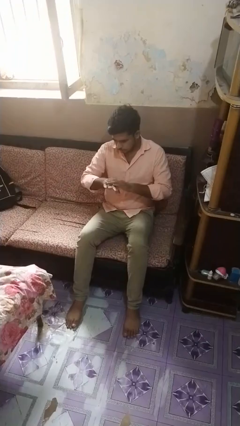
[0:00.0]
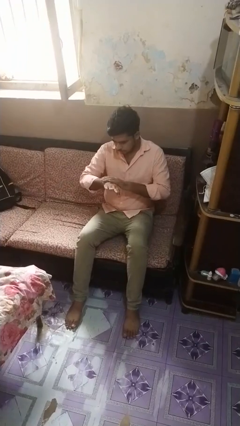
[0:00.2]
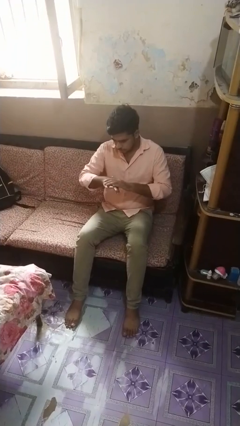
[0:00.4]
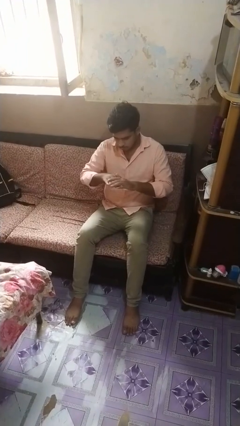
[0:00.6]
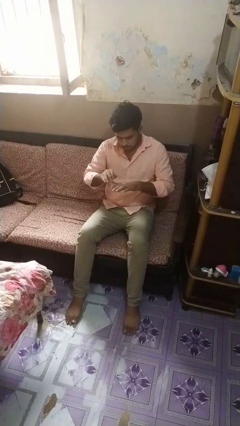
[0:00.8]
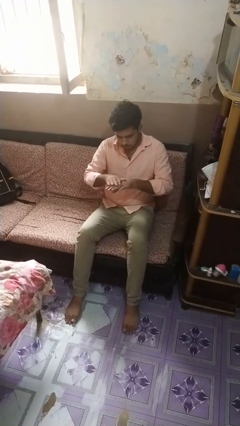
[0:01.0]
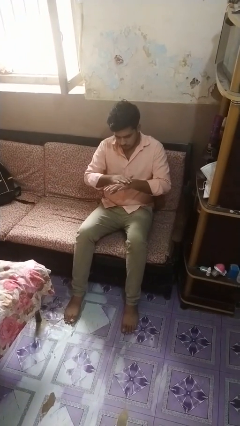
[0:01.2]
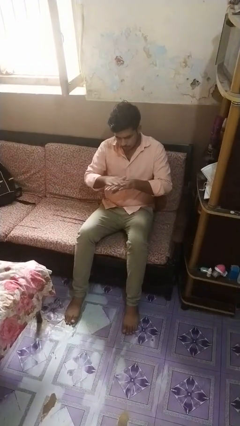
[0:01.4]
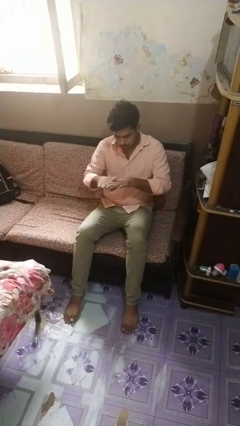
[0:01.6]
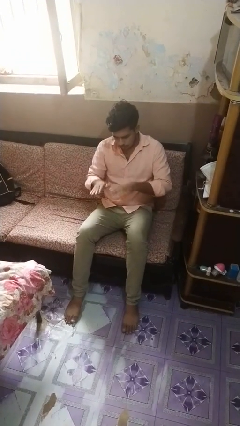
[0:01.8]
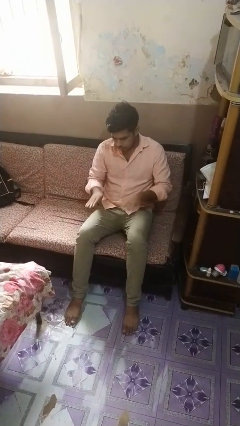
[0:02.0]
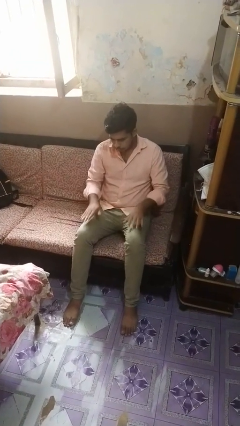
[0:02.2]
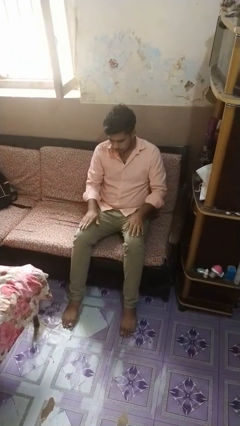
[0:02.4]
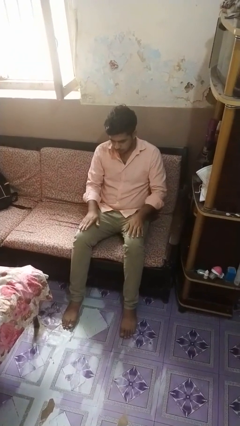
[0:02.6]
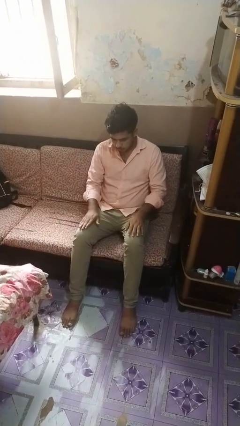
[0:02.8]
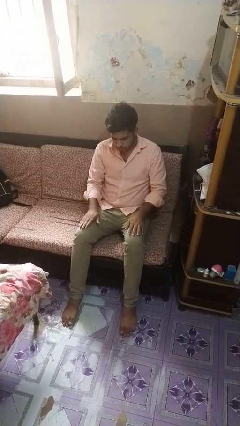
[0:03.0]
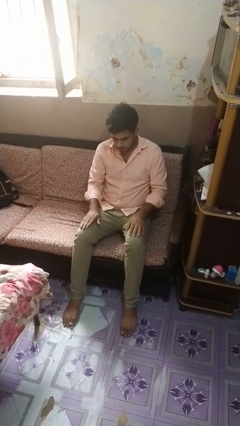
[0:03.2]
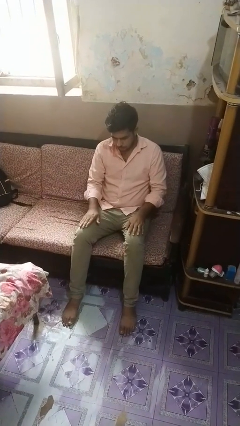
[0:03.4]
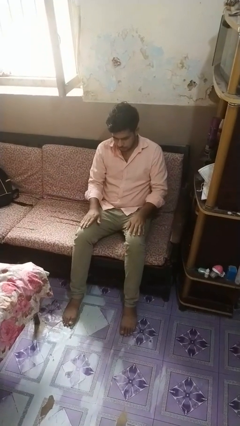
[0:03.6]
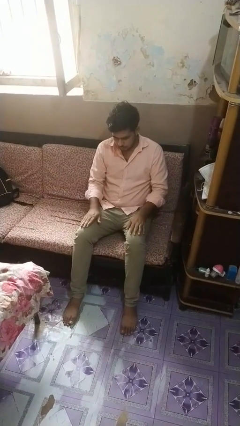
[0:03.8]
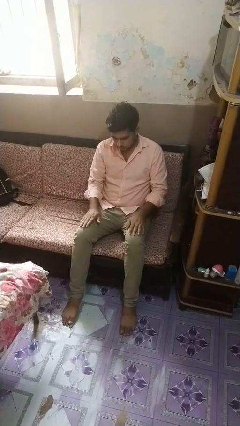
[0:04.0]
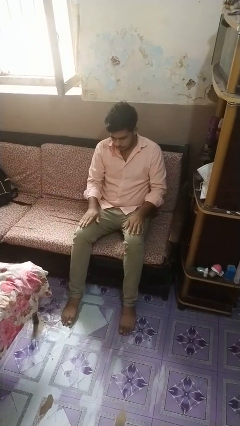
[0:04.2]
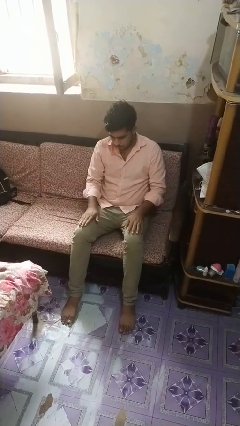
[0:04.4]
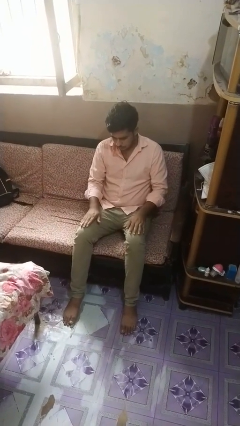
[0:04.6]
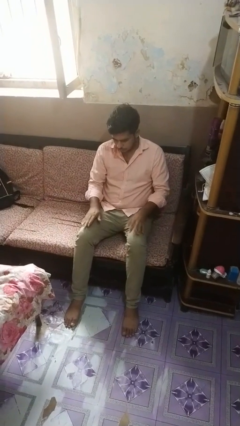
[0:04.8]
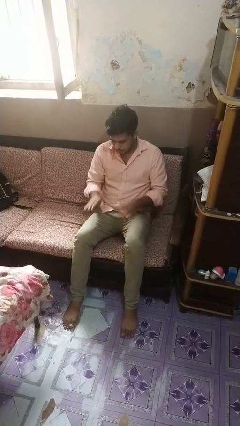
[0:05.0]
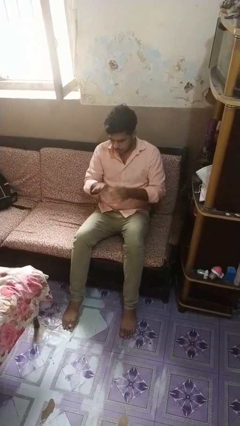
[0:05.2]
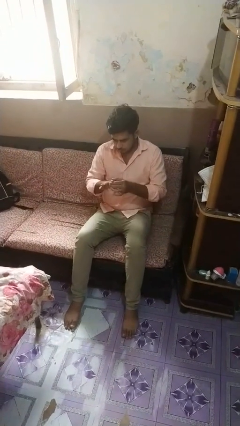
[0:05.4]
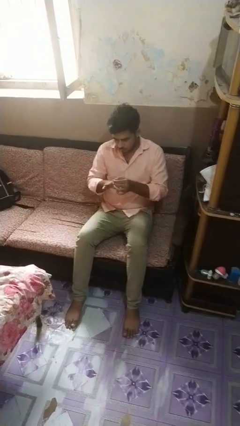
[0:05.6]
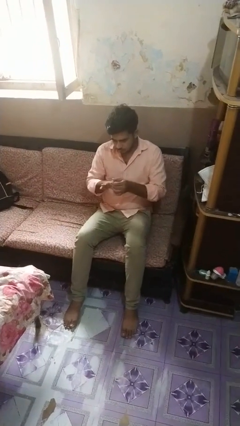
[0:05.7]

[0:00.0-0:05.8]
person looks at hands in lap

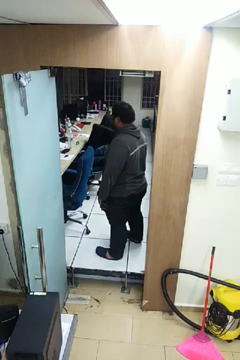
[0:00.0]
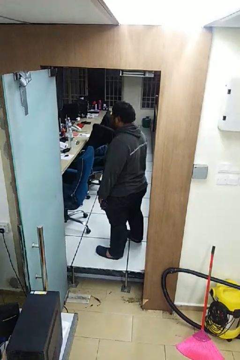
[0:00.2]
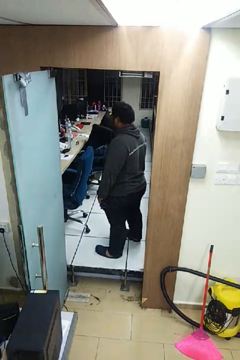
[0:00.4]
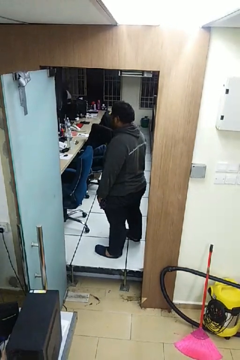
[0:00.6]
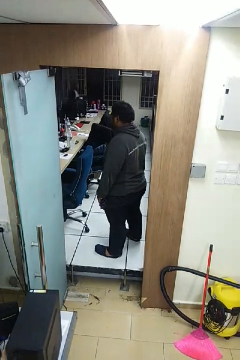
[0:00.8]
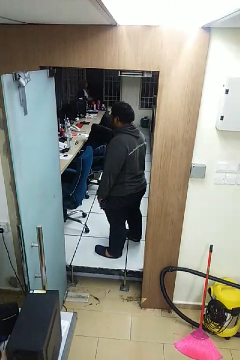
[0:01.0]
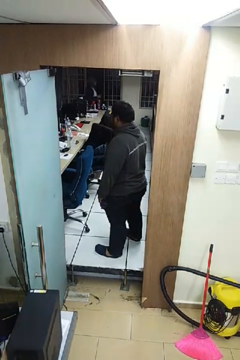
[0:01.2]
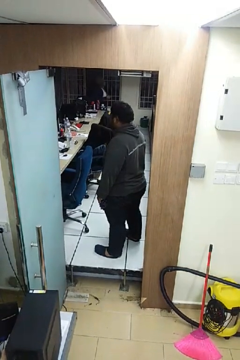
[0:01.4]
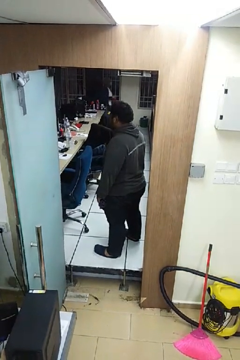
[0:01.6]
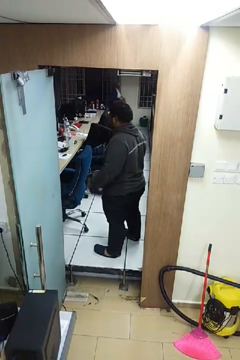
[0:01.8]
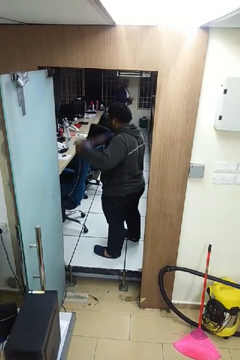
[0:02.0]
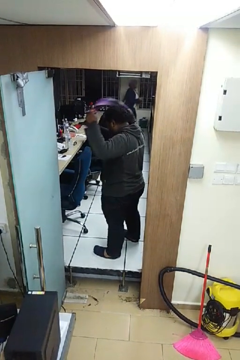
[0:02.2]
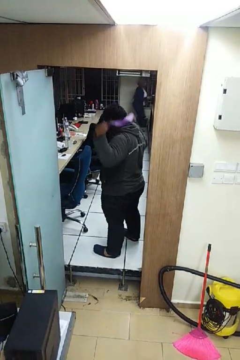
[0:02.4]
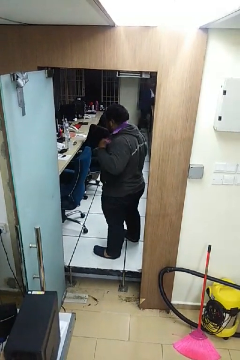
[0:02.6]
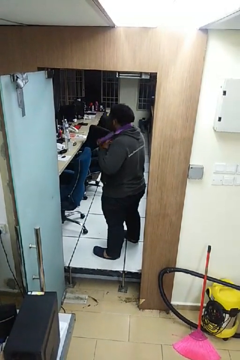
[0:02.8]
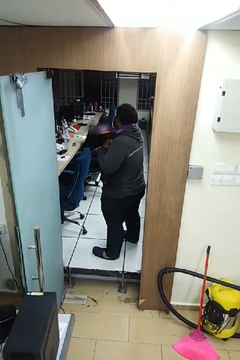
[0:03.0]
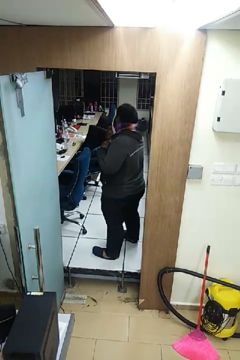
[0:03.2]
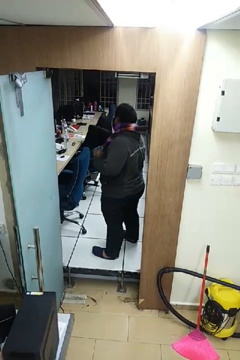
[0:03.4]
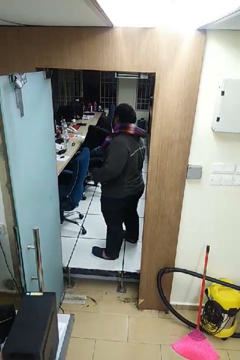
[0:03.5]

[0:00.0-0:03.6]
person puts on scarf

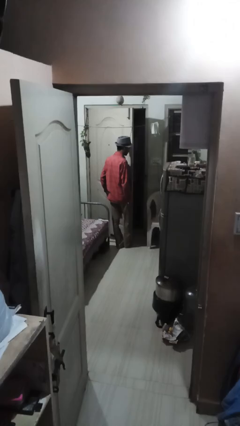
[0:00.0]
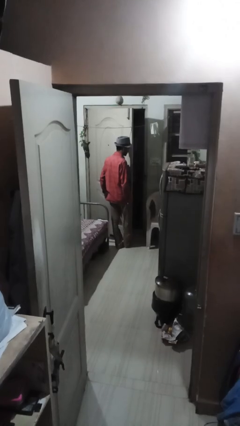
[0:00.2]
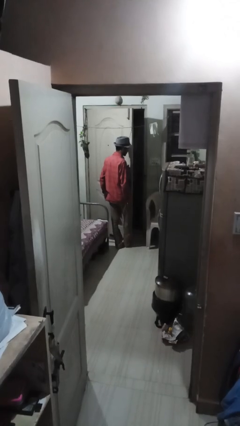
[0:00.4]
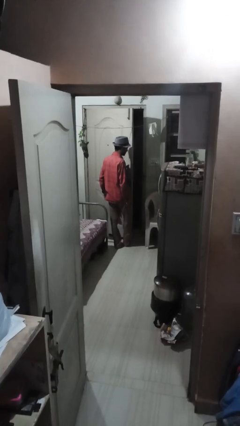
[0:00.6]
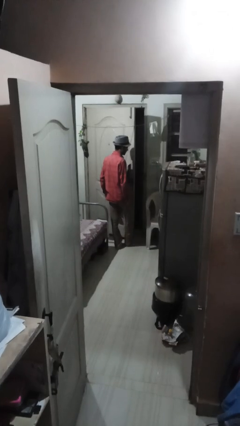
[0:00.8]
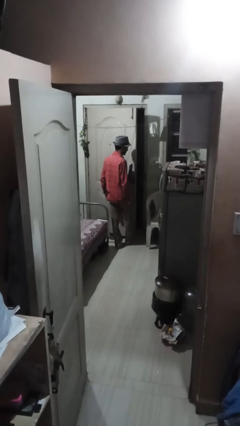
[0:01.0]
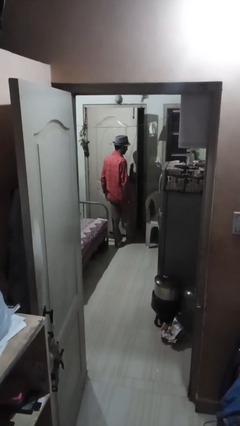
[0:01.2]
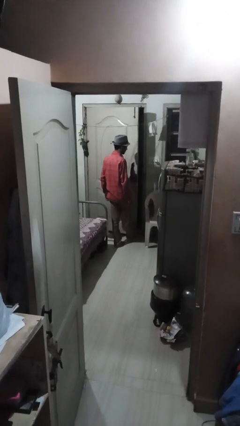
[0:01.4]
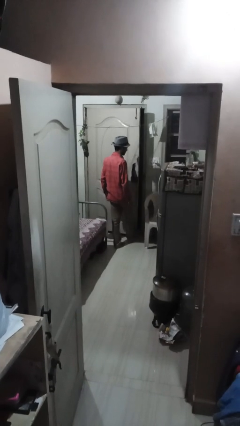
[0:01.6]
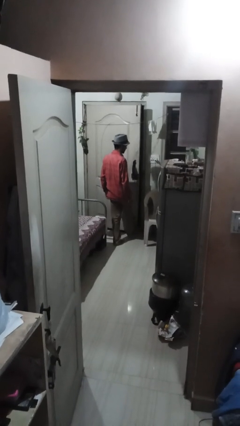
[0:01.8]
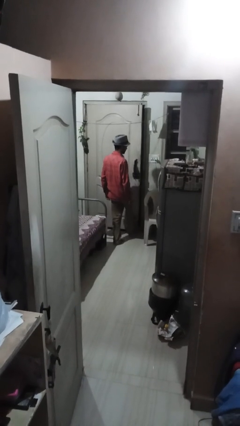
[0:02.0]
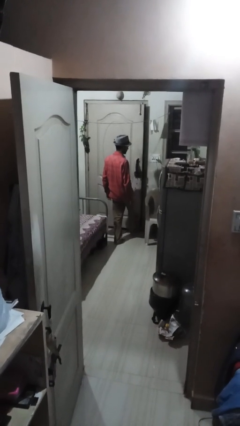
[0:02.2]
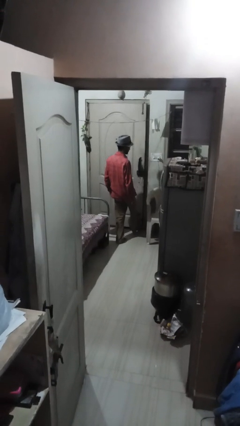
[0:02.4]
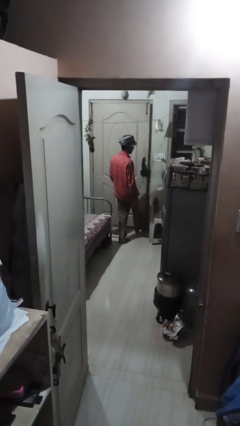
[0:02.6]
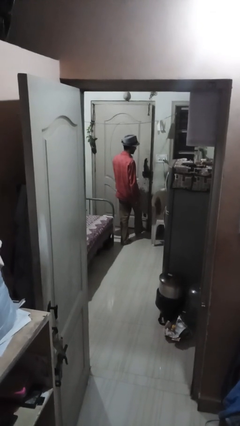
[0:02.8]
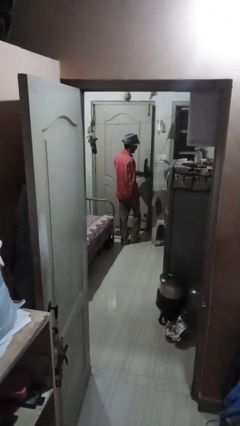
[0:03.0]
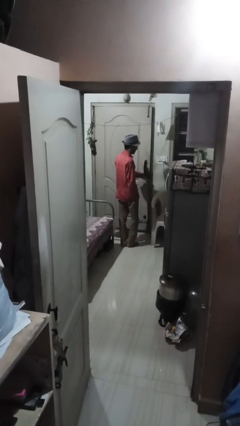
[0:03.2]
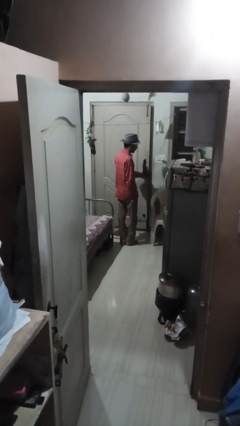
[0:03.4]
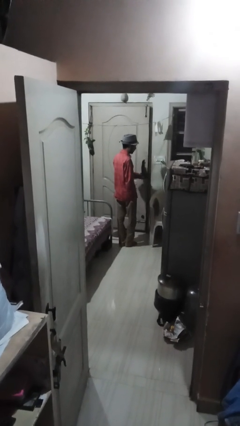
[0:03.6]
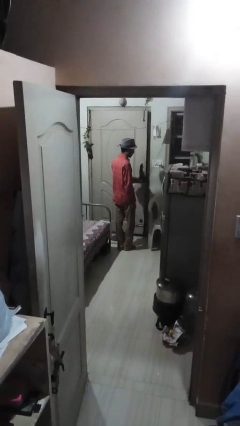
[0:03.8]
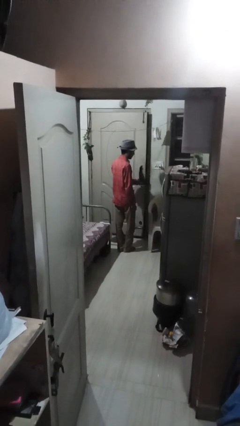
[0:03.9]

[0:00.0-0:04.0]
person closes door with foot

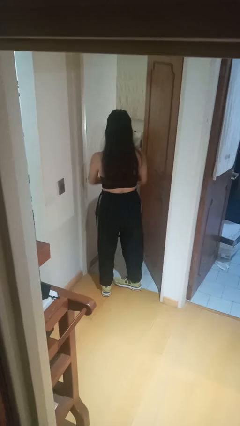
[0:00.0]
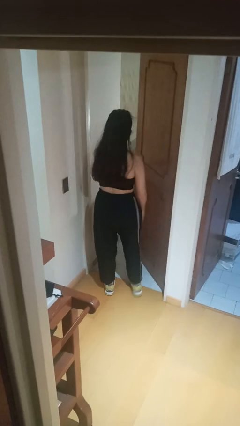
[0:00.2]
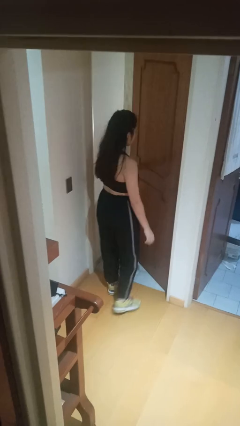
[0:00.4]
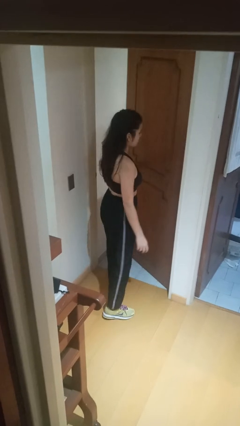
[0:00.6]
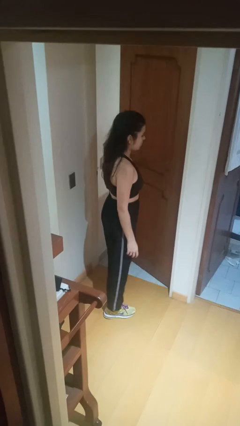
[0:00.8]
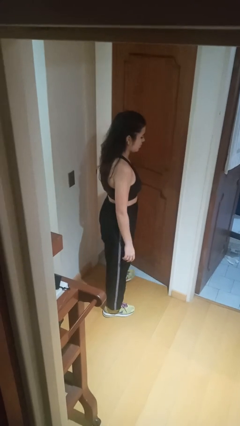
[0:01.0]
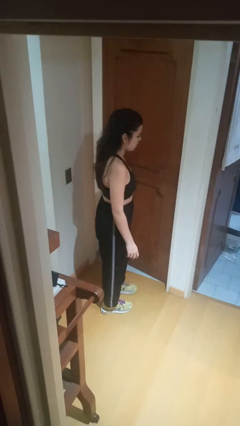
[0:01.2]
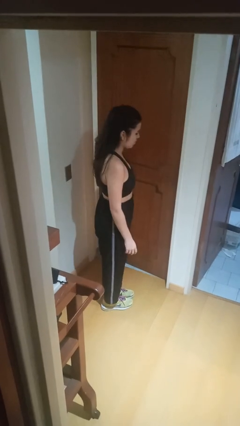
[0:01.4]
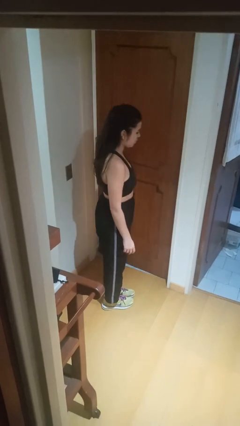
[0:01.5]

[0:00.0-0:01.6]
person closes facility door

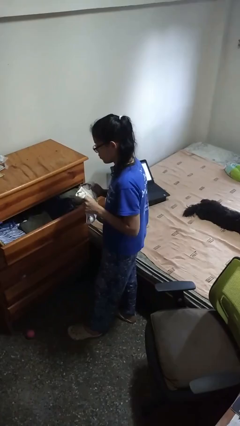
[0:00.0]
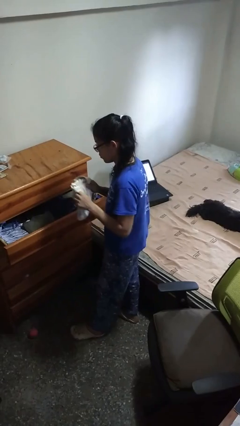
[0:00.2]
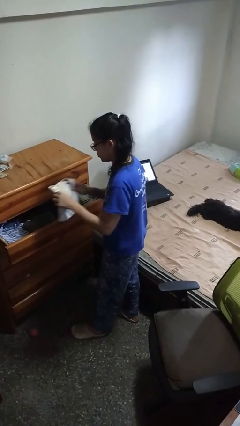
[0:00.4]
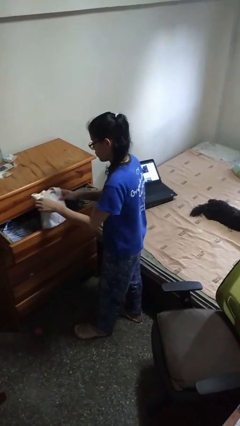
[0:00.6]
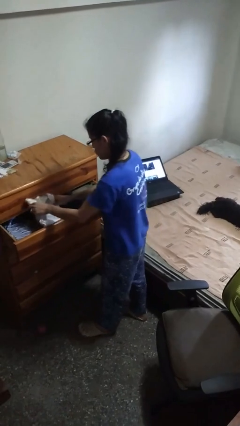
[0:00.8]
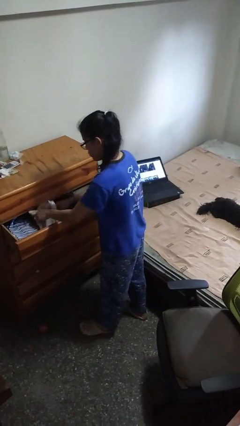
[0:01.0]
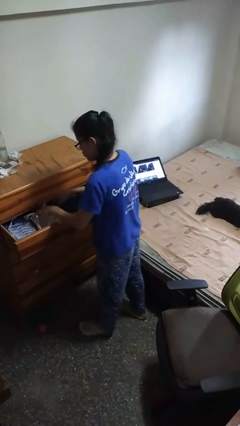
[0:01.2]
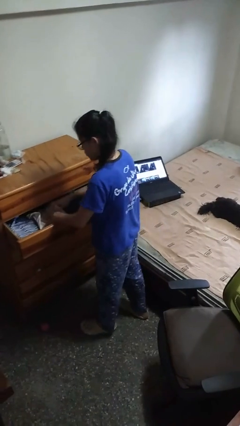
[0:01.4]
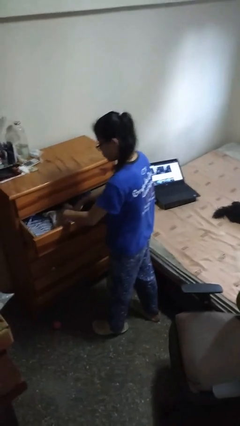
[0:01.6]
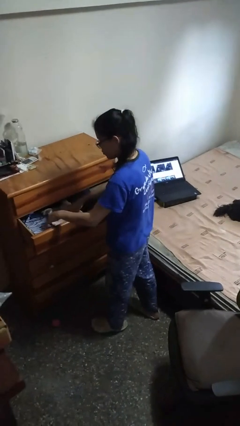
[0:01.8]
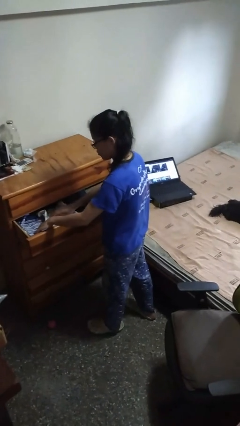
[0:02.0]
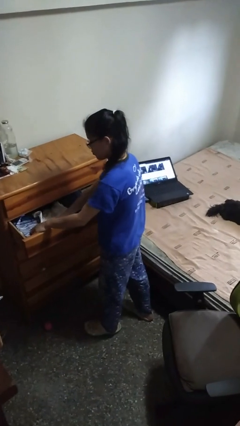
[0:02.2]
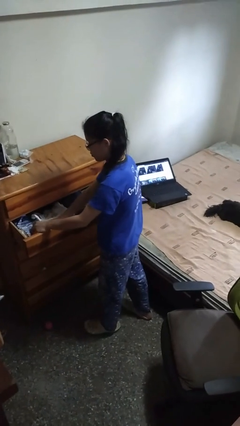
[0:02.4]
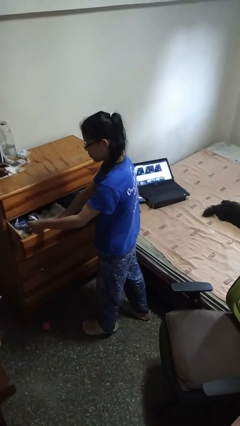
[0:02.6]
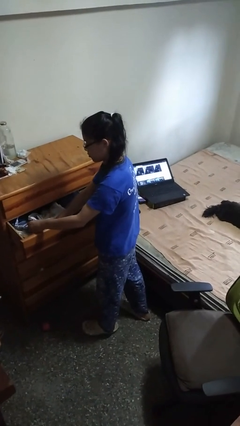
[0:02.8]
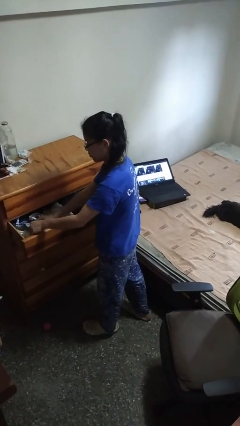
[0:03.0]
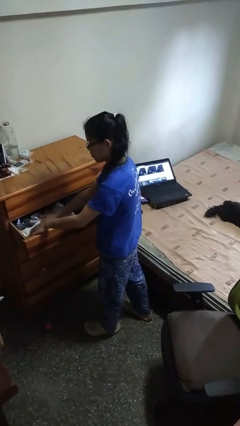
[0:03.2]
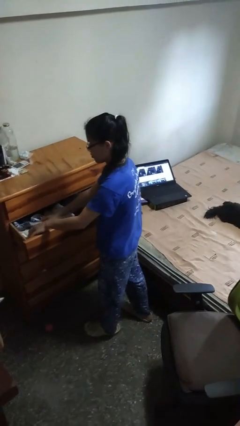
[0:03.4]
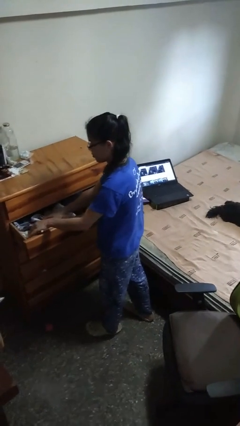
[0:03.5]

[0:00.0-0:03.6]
person puts clothes into dresser
